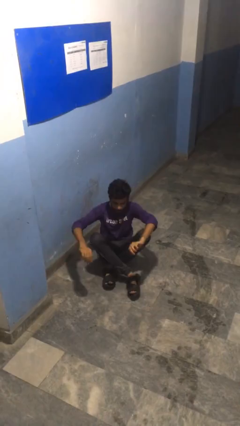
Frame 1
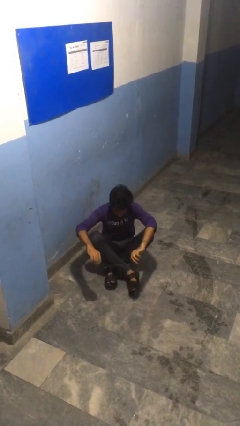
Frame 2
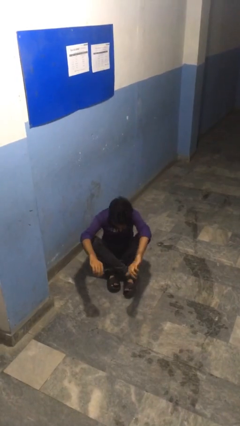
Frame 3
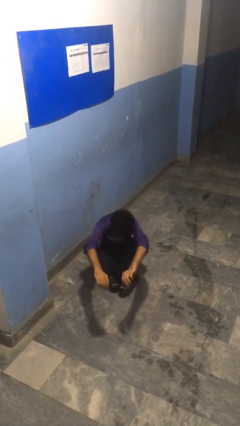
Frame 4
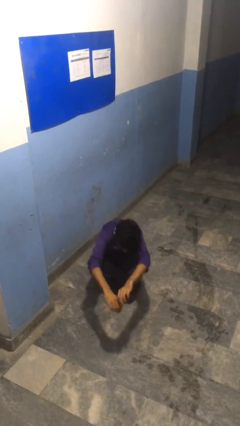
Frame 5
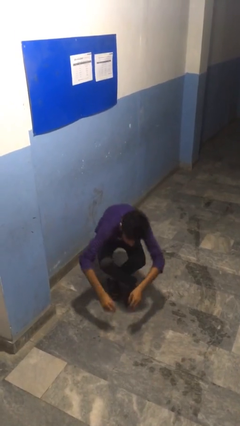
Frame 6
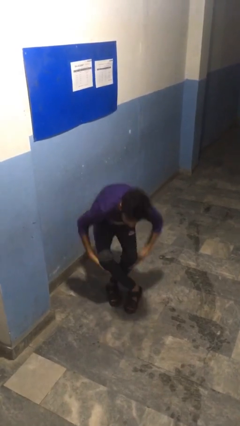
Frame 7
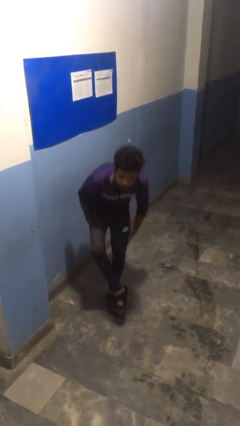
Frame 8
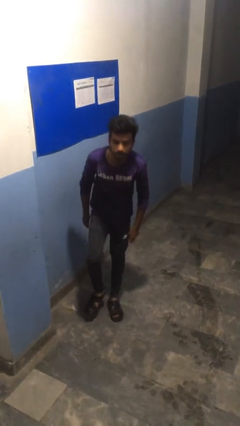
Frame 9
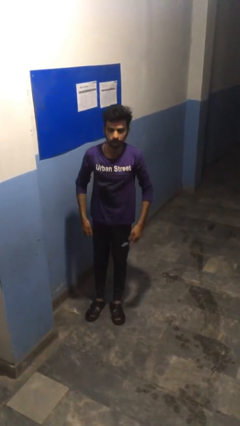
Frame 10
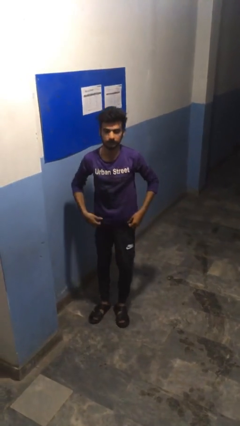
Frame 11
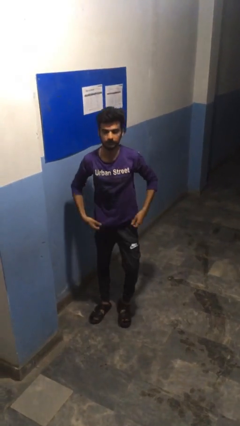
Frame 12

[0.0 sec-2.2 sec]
person stands up from floor

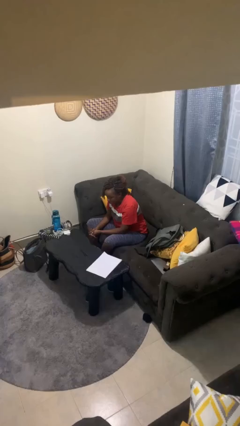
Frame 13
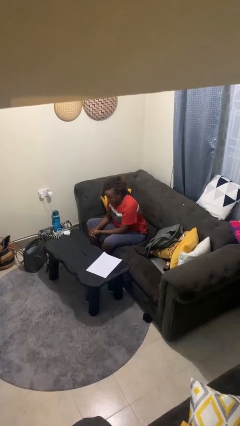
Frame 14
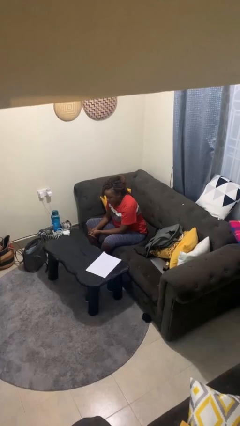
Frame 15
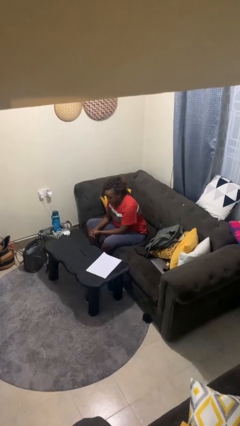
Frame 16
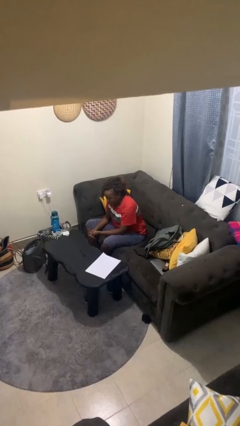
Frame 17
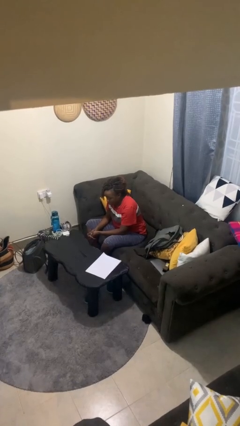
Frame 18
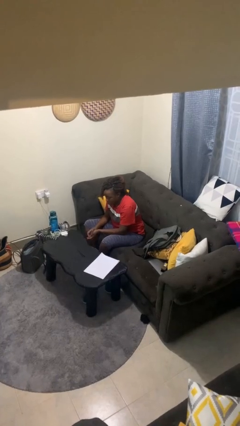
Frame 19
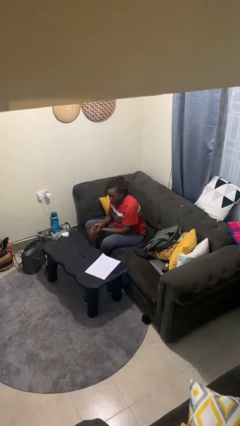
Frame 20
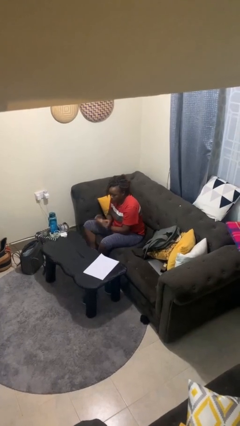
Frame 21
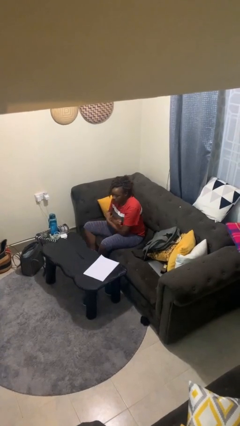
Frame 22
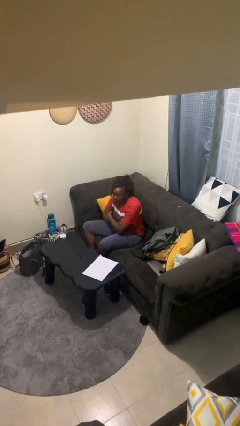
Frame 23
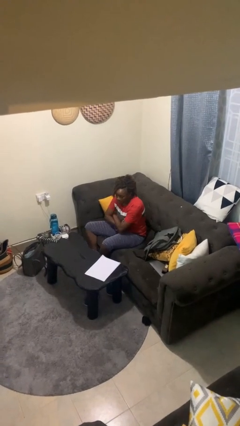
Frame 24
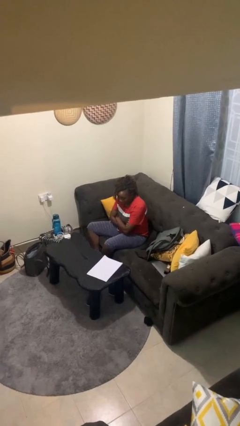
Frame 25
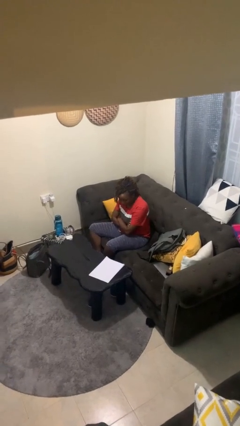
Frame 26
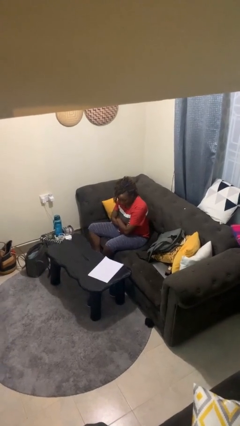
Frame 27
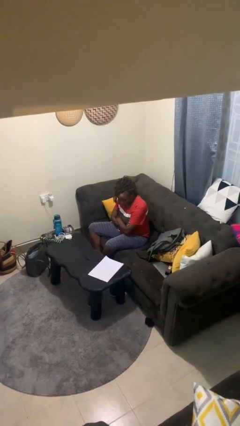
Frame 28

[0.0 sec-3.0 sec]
person crosses arms

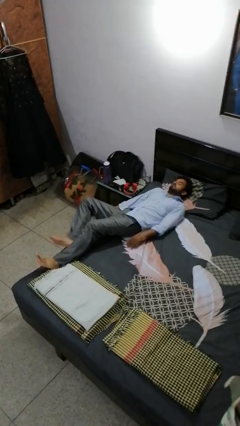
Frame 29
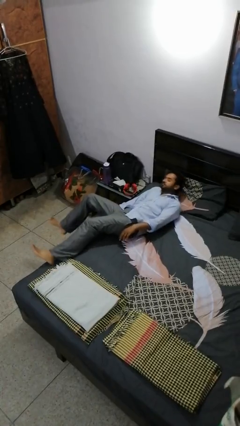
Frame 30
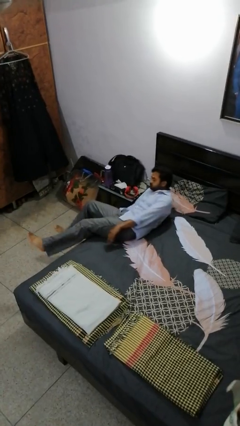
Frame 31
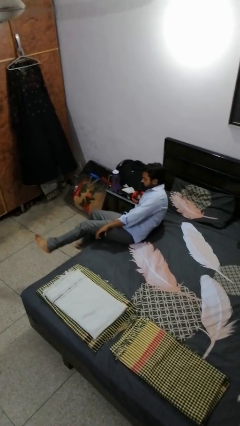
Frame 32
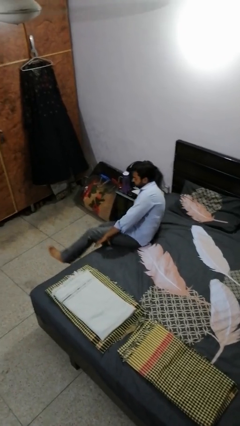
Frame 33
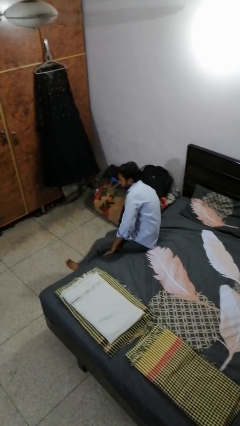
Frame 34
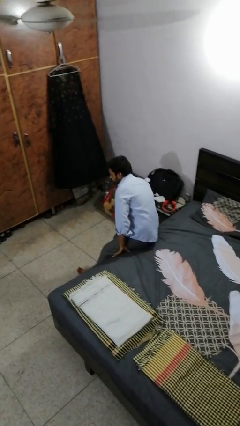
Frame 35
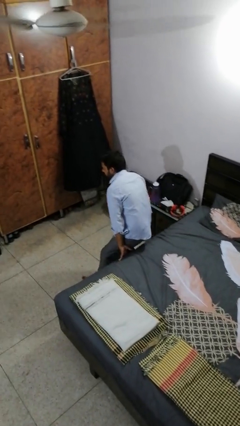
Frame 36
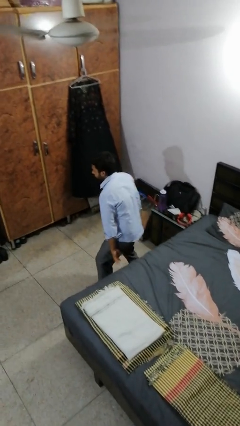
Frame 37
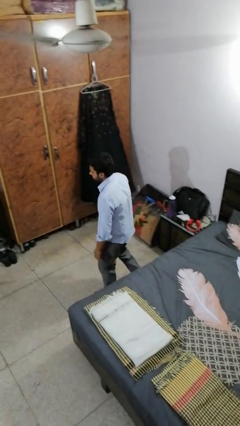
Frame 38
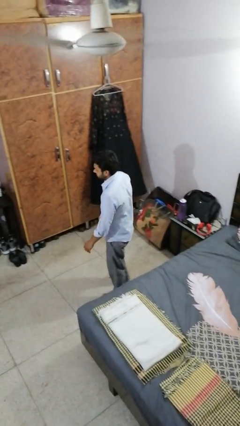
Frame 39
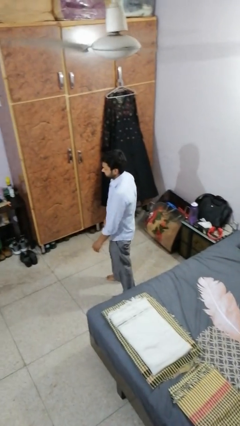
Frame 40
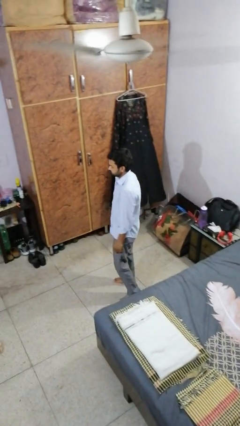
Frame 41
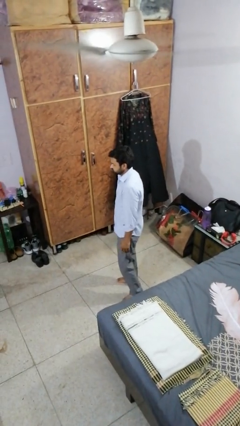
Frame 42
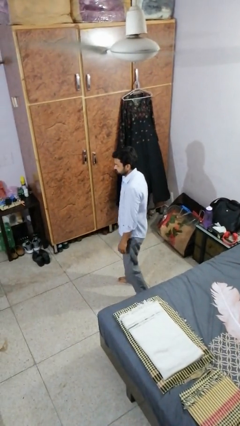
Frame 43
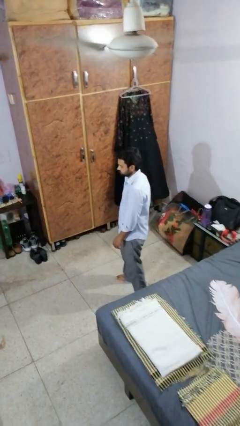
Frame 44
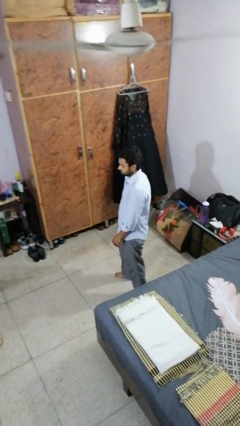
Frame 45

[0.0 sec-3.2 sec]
person stands up

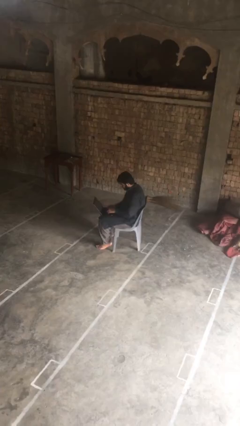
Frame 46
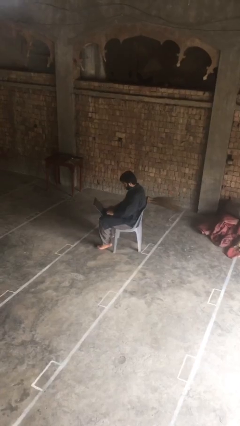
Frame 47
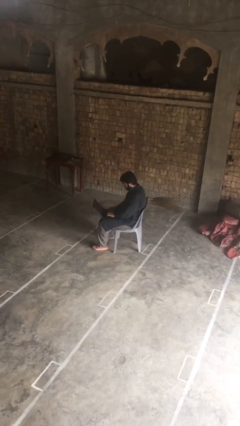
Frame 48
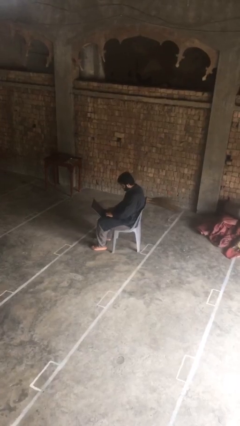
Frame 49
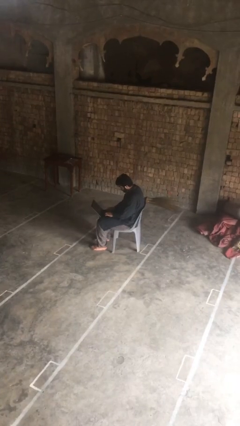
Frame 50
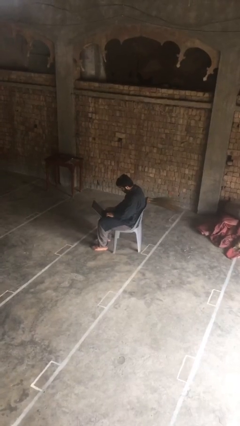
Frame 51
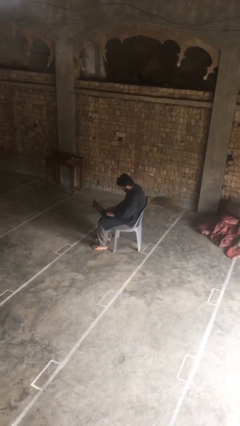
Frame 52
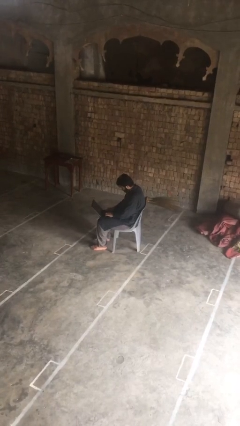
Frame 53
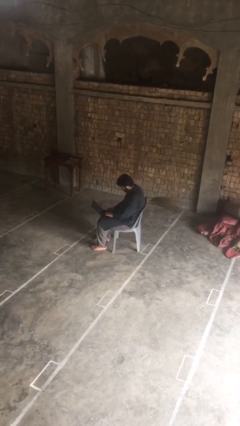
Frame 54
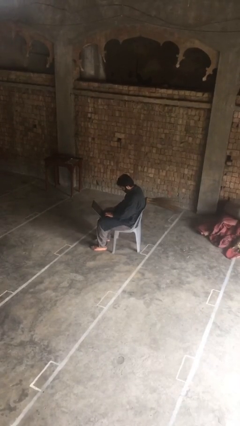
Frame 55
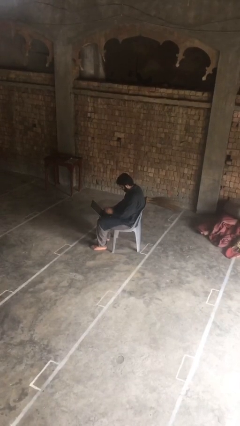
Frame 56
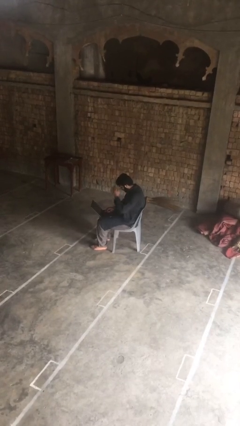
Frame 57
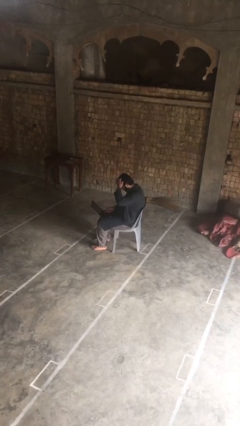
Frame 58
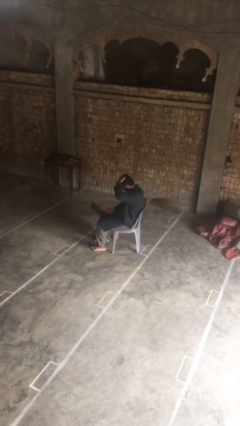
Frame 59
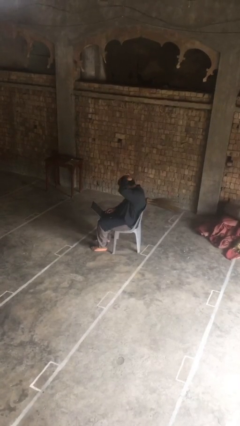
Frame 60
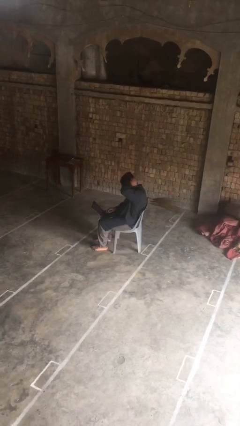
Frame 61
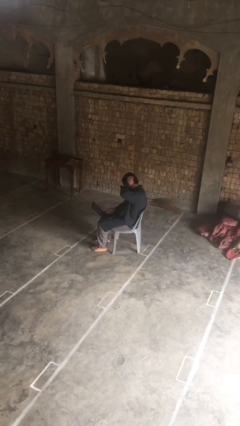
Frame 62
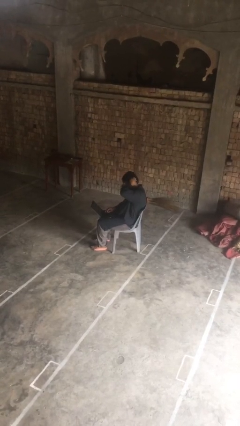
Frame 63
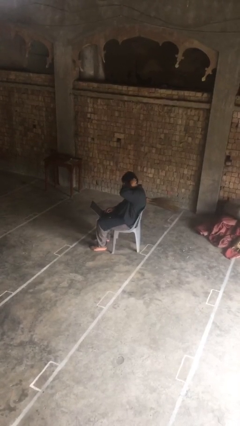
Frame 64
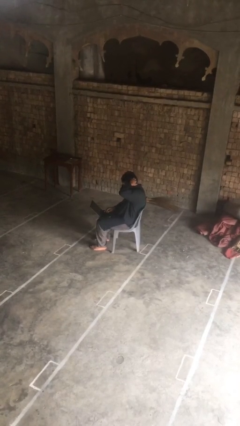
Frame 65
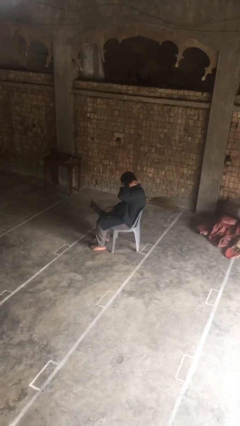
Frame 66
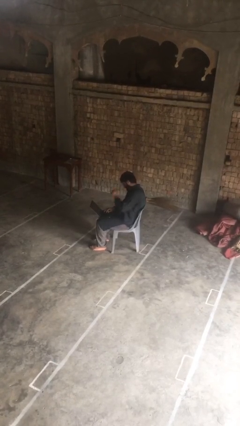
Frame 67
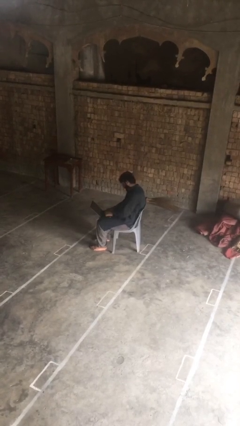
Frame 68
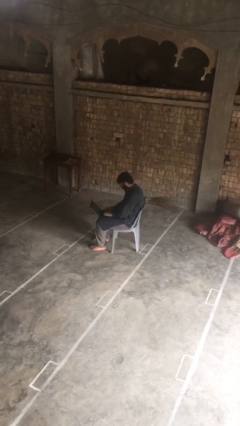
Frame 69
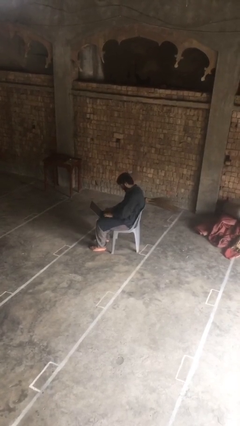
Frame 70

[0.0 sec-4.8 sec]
person interacts with laptop

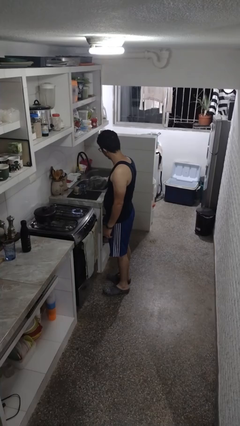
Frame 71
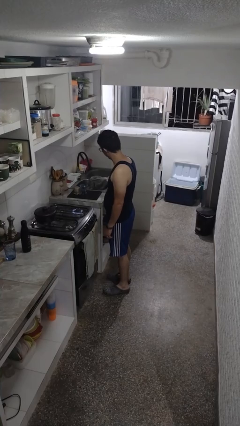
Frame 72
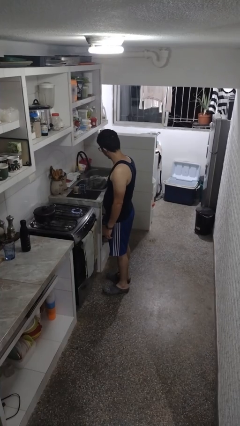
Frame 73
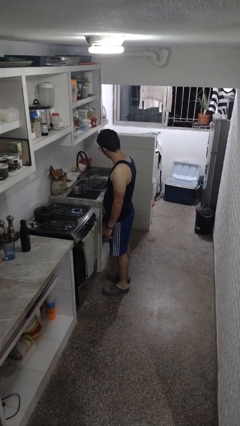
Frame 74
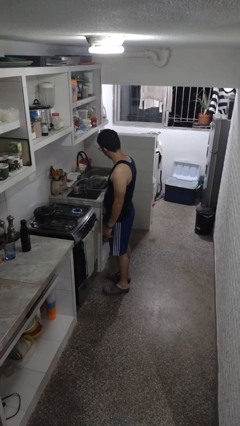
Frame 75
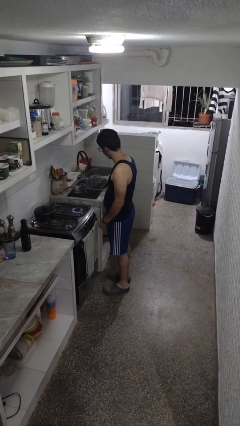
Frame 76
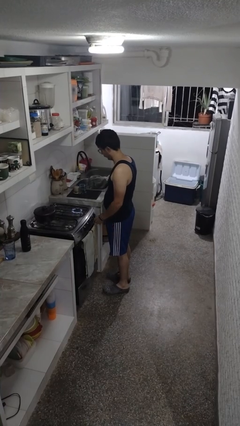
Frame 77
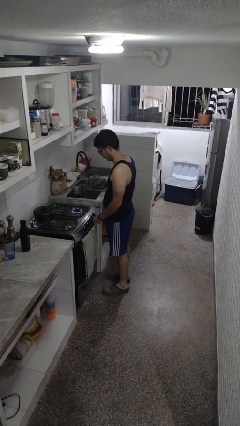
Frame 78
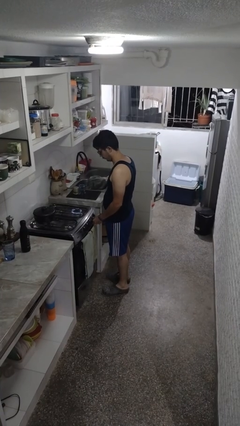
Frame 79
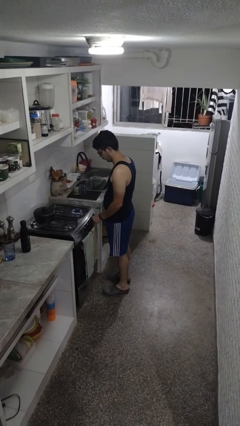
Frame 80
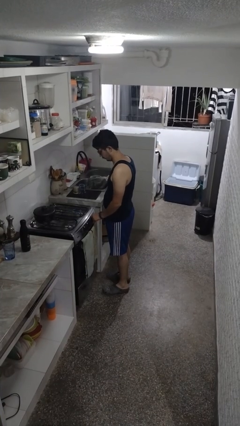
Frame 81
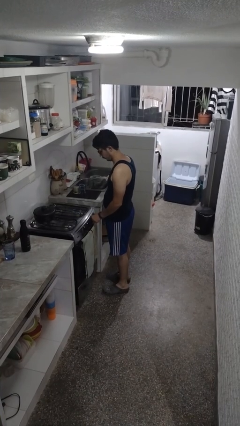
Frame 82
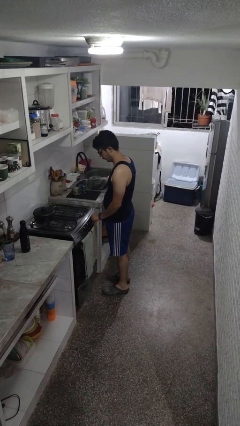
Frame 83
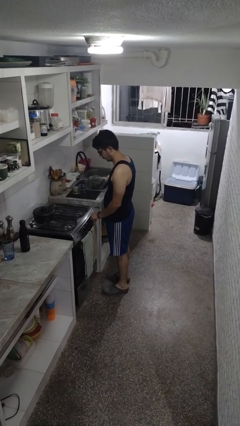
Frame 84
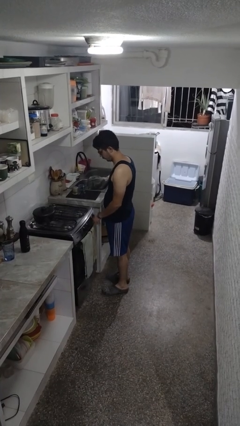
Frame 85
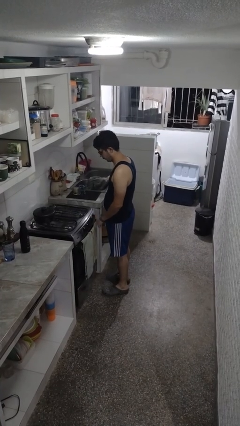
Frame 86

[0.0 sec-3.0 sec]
person turns off stovetop

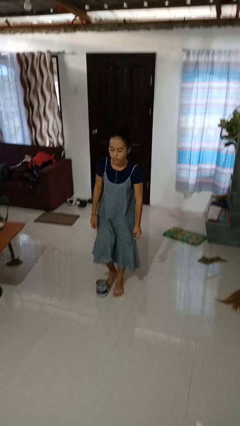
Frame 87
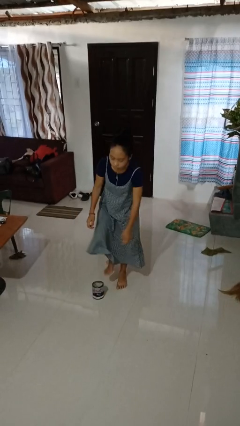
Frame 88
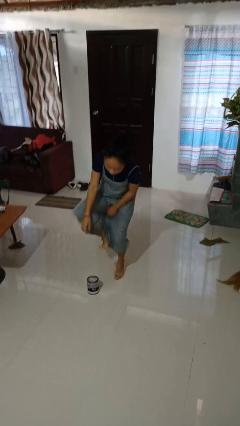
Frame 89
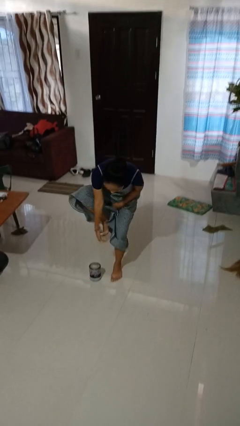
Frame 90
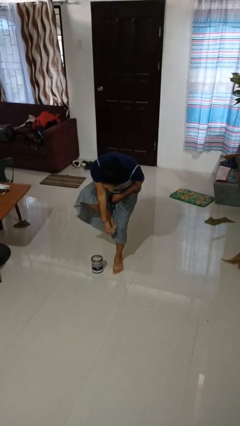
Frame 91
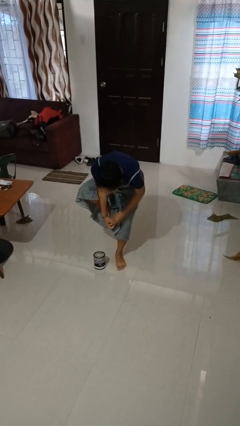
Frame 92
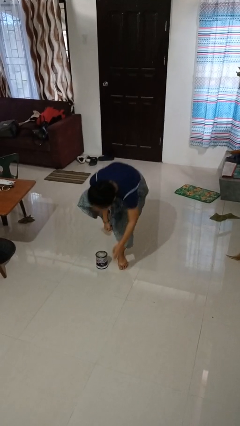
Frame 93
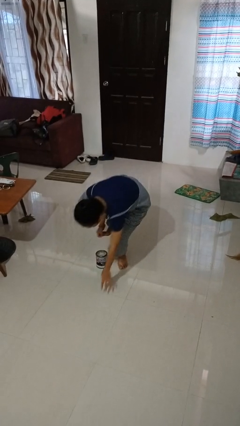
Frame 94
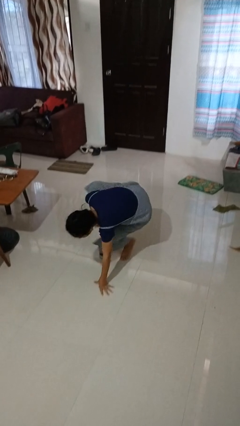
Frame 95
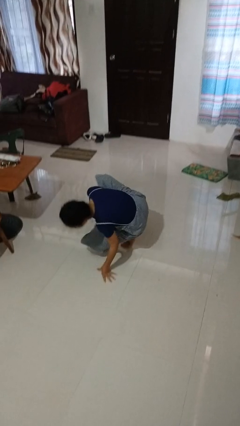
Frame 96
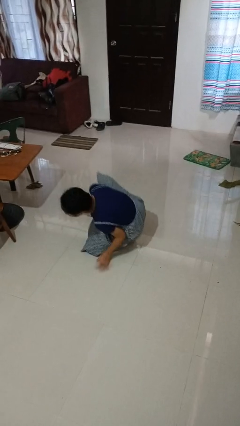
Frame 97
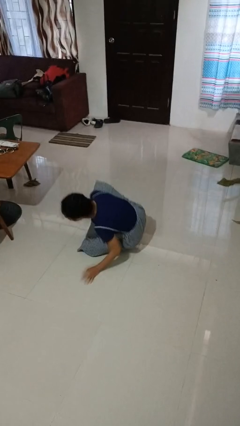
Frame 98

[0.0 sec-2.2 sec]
person trips on object on floor
